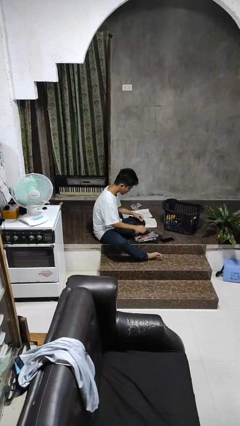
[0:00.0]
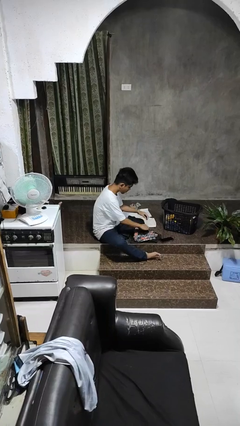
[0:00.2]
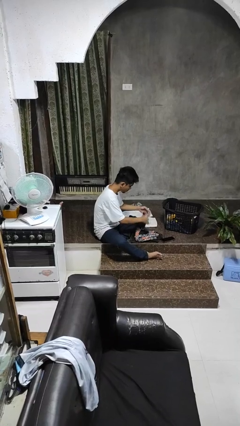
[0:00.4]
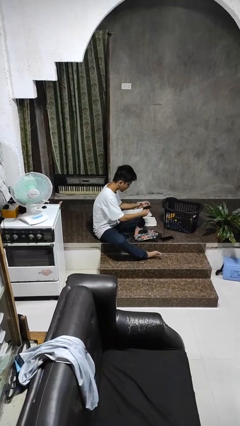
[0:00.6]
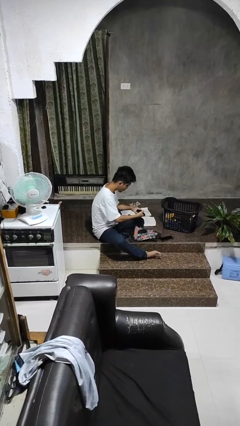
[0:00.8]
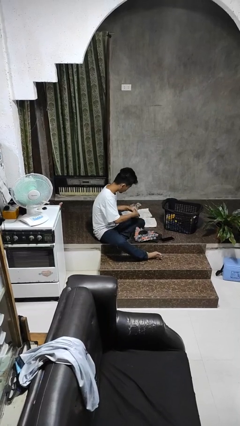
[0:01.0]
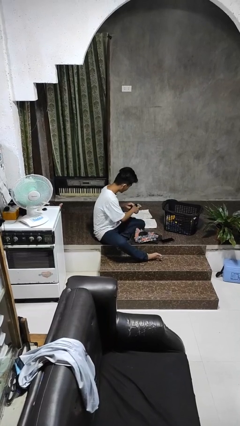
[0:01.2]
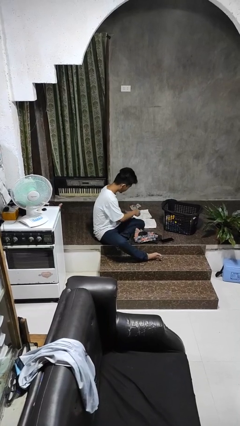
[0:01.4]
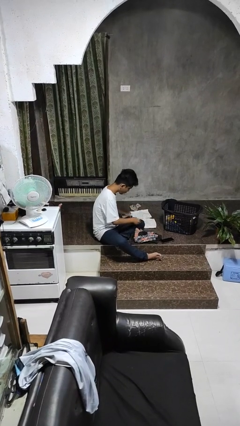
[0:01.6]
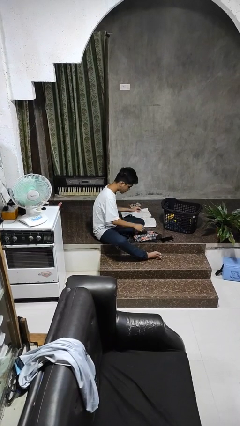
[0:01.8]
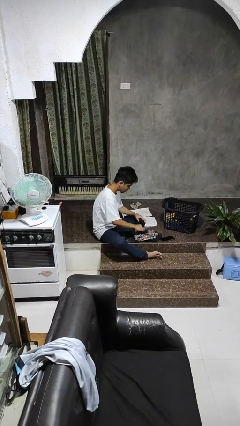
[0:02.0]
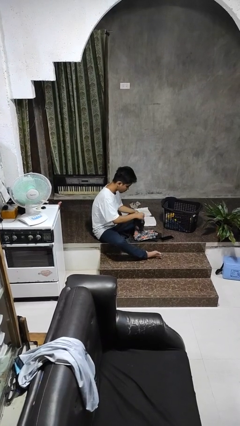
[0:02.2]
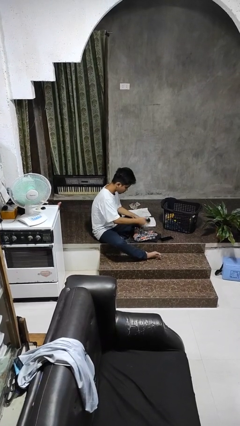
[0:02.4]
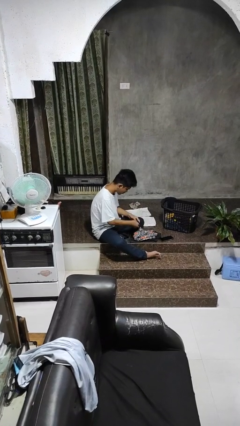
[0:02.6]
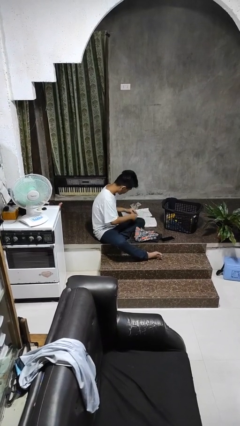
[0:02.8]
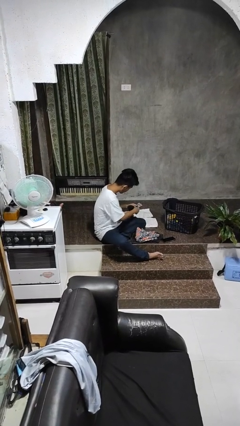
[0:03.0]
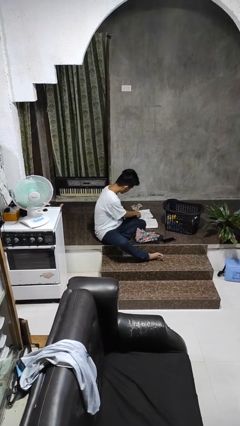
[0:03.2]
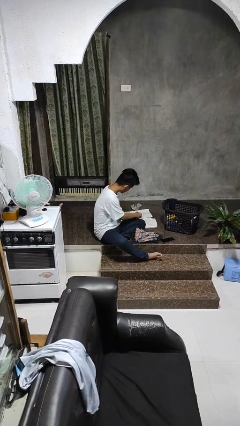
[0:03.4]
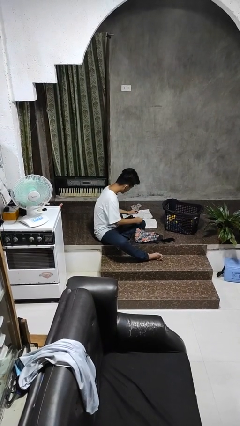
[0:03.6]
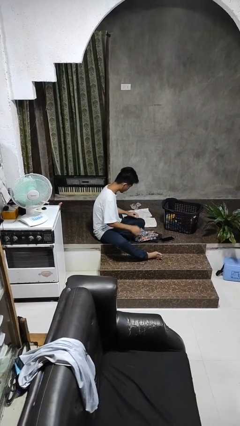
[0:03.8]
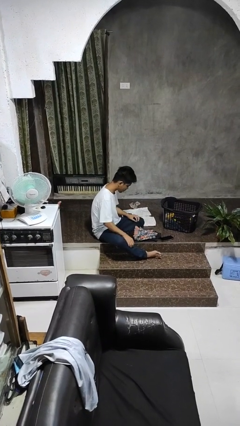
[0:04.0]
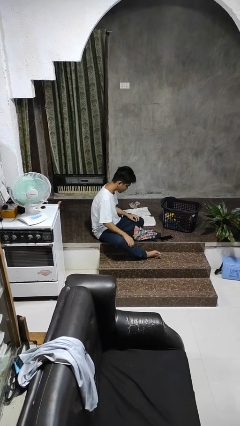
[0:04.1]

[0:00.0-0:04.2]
person folds socks

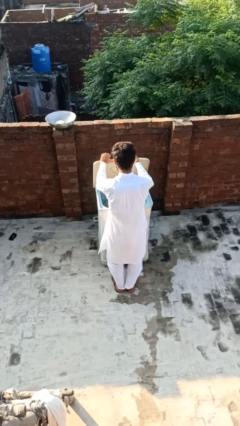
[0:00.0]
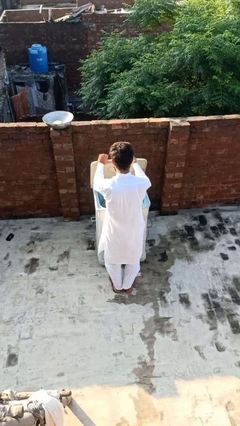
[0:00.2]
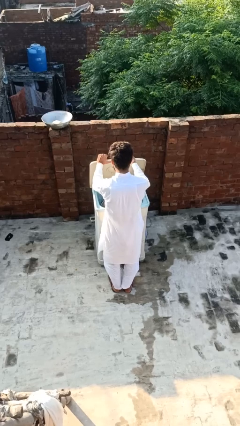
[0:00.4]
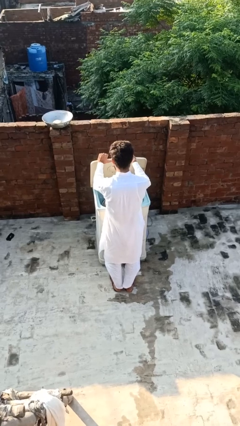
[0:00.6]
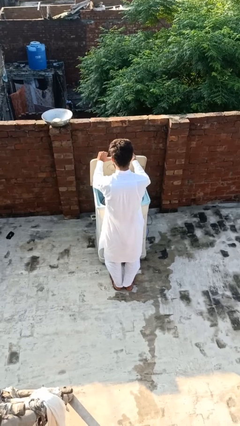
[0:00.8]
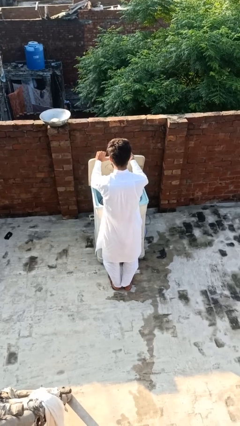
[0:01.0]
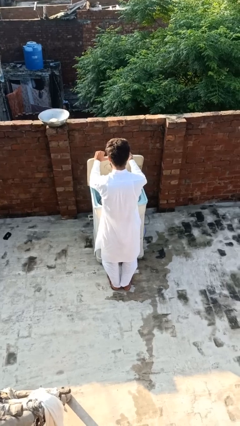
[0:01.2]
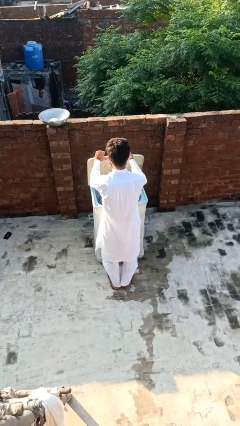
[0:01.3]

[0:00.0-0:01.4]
person opens clothes washer

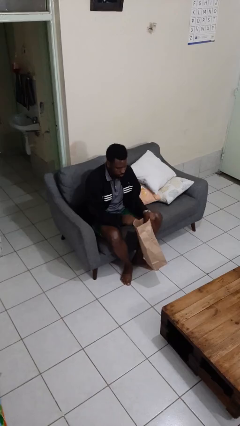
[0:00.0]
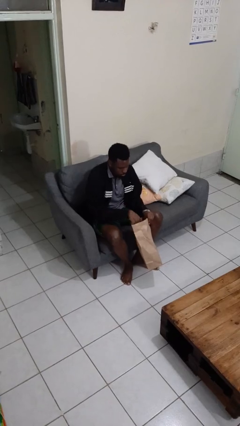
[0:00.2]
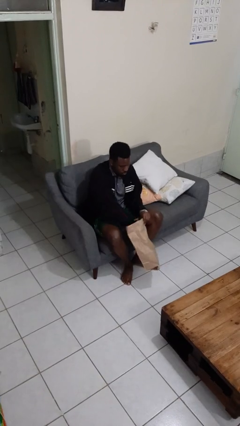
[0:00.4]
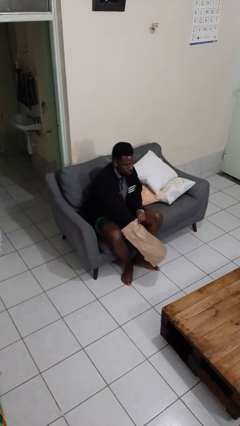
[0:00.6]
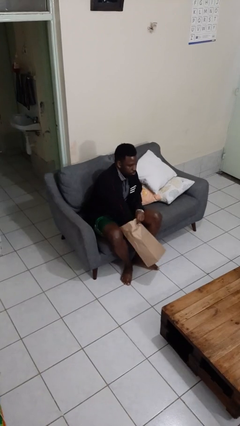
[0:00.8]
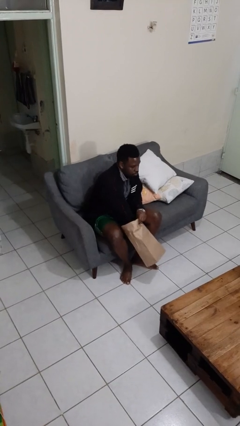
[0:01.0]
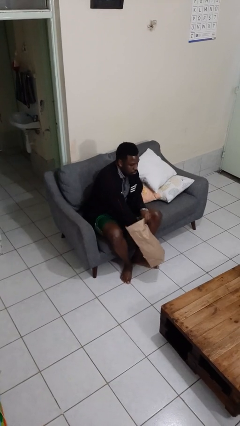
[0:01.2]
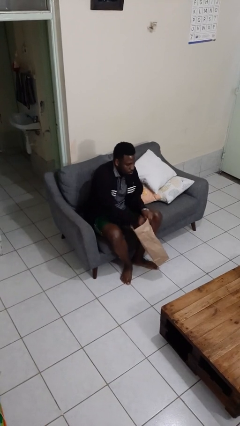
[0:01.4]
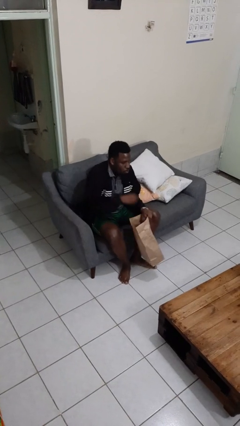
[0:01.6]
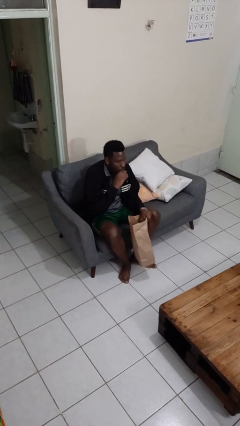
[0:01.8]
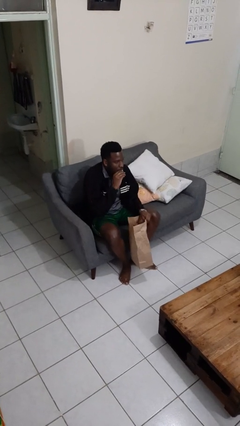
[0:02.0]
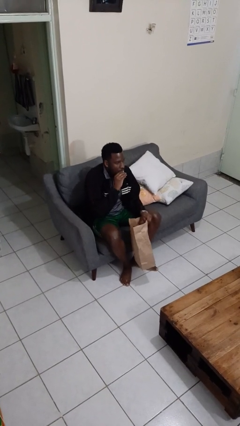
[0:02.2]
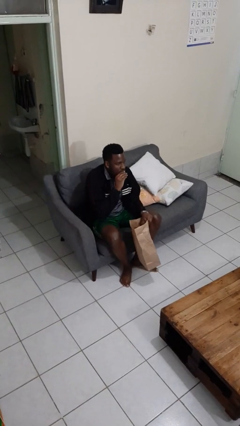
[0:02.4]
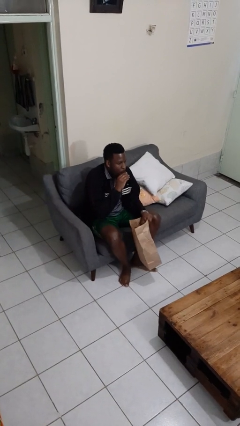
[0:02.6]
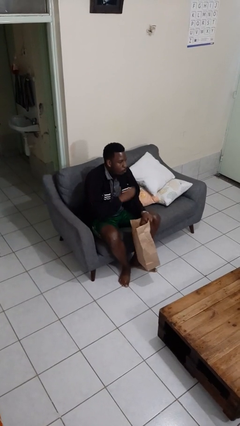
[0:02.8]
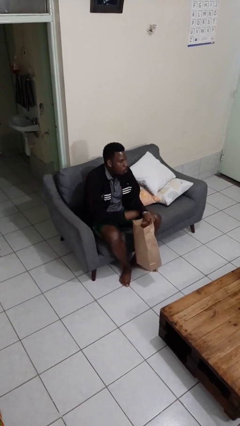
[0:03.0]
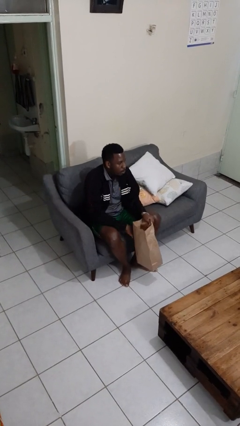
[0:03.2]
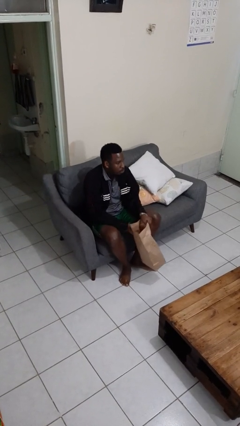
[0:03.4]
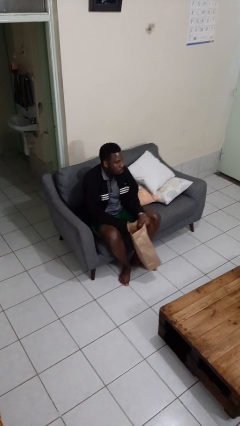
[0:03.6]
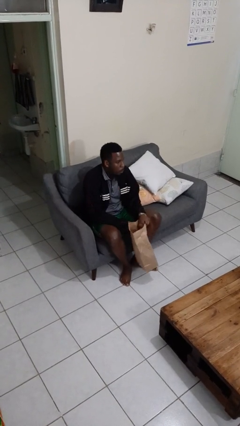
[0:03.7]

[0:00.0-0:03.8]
person eats snack from bag

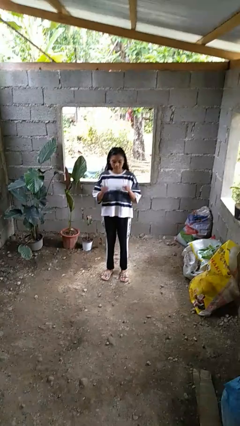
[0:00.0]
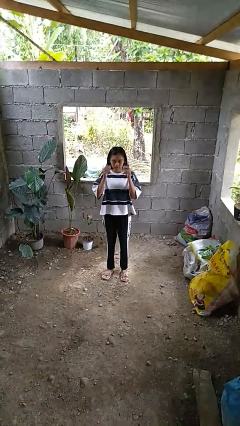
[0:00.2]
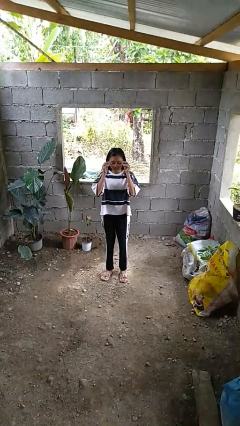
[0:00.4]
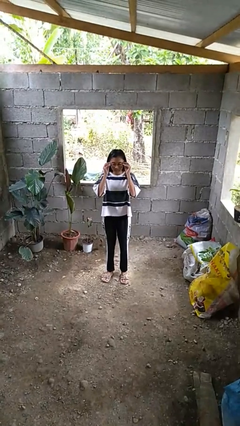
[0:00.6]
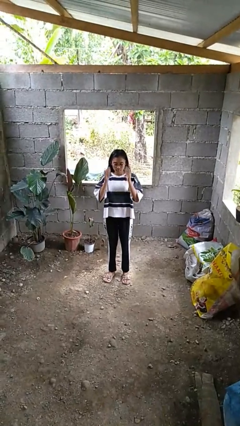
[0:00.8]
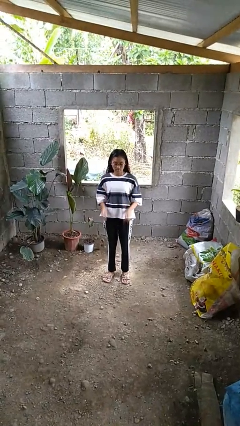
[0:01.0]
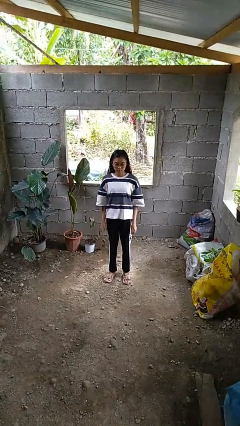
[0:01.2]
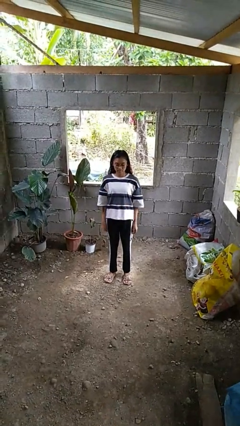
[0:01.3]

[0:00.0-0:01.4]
person puts on glasses

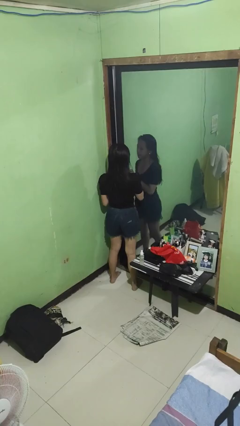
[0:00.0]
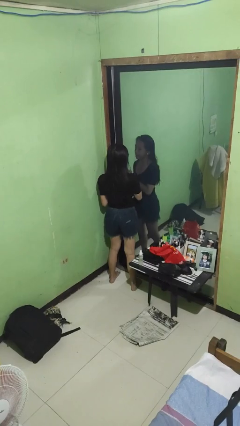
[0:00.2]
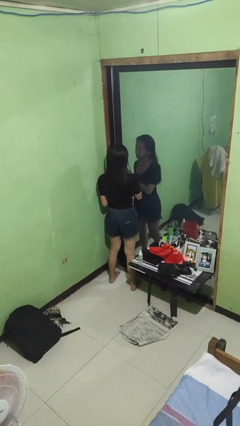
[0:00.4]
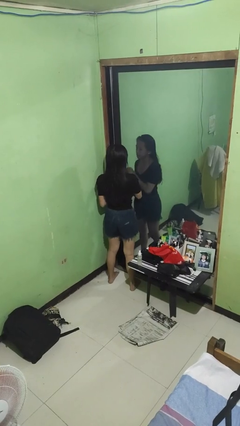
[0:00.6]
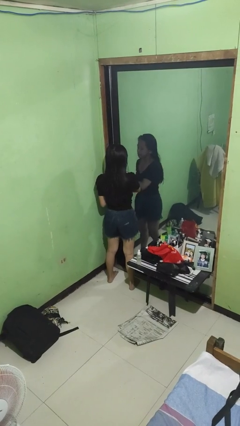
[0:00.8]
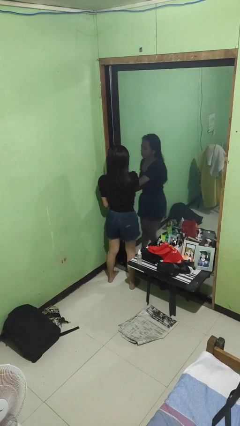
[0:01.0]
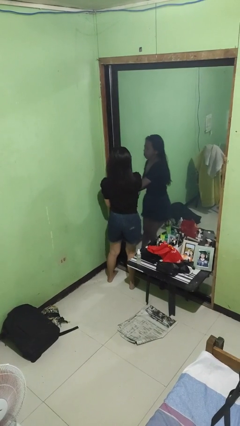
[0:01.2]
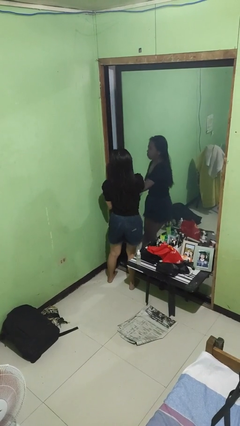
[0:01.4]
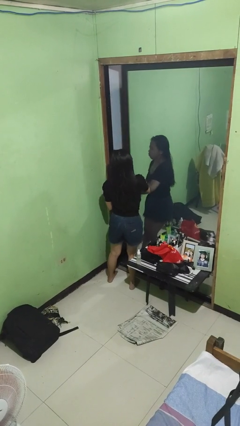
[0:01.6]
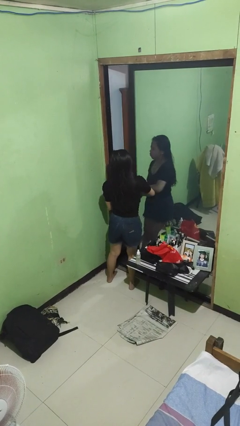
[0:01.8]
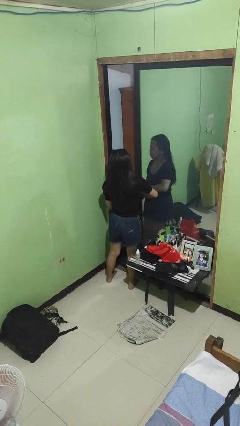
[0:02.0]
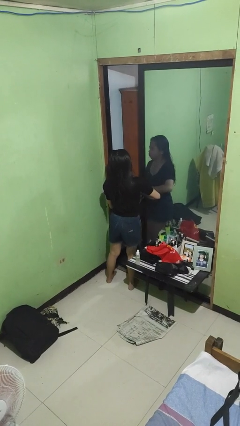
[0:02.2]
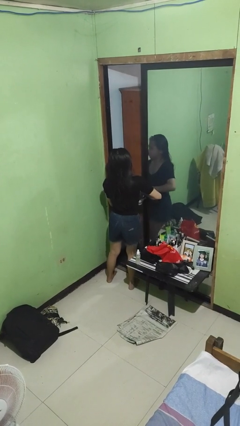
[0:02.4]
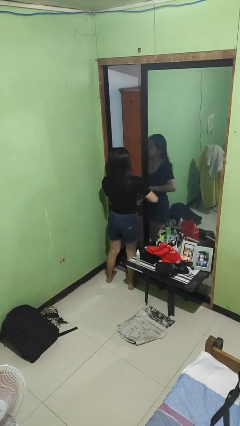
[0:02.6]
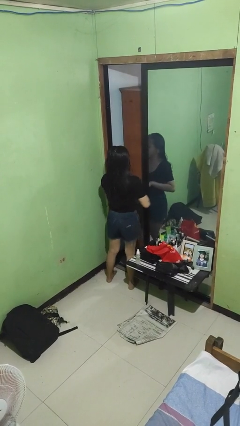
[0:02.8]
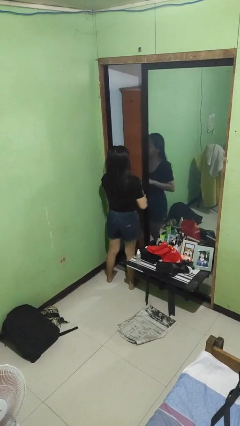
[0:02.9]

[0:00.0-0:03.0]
person opens sliding door

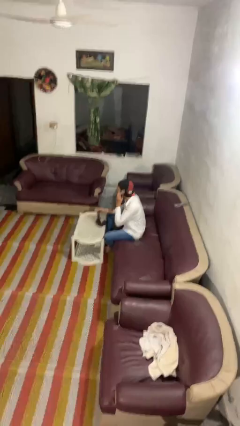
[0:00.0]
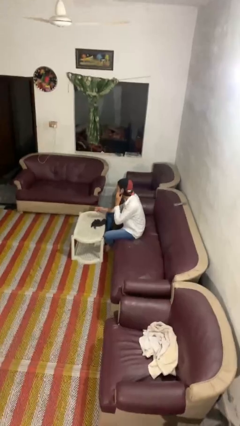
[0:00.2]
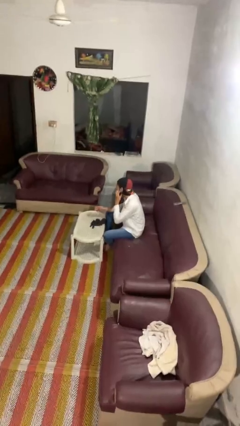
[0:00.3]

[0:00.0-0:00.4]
person puts on gloves

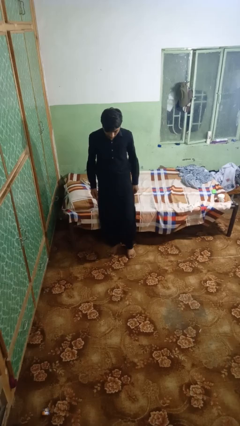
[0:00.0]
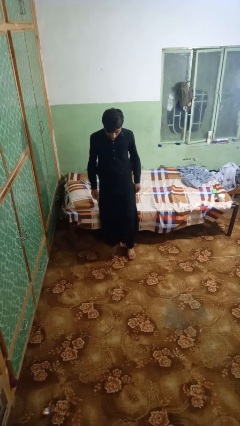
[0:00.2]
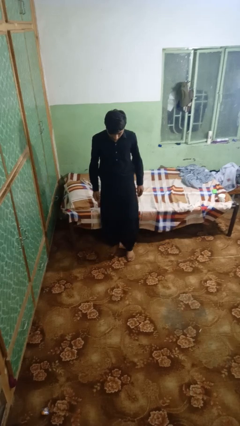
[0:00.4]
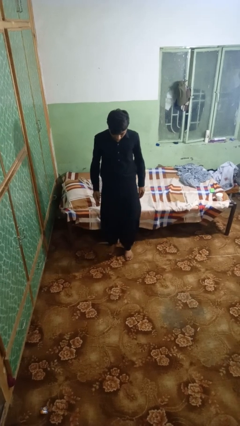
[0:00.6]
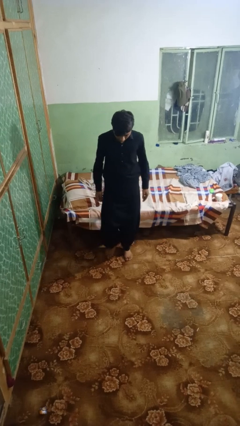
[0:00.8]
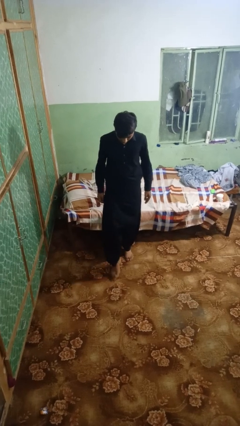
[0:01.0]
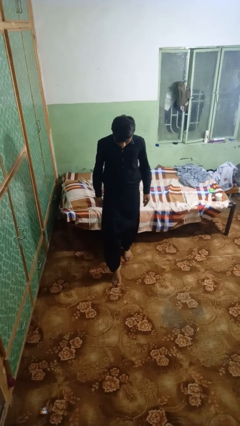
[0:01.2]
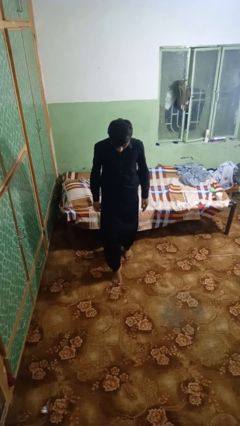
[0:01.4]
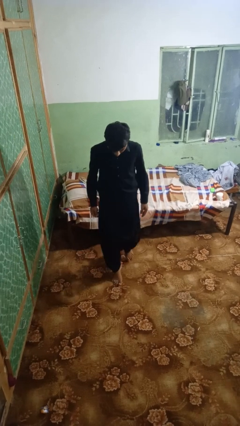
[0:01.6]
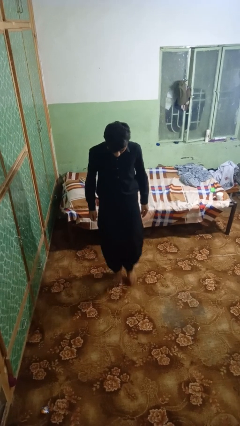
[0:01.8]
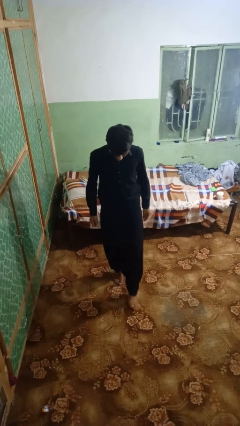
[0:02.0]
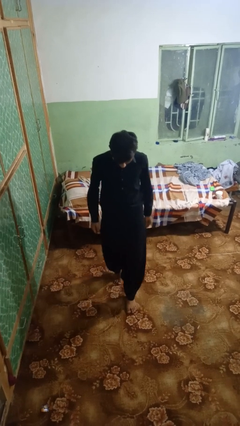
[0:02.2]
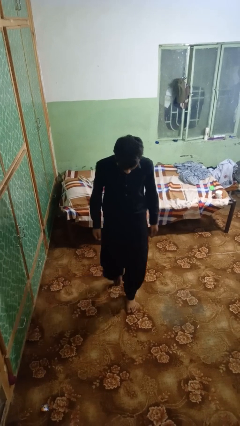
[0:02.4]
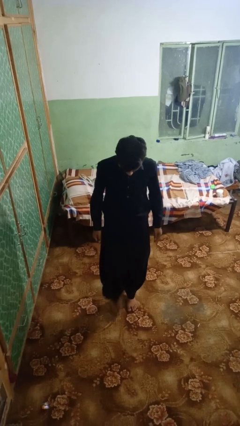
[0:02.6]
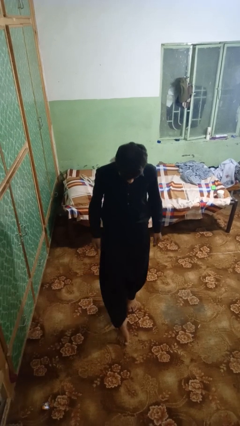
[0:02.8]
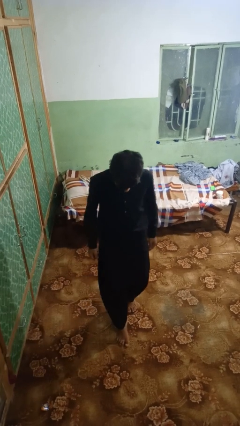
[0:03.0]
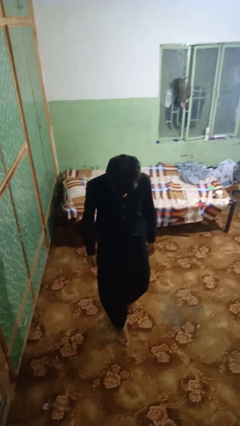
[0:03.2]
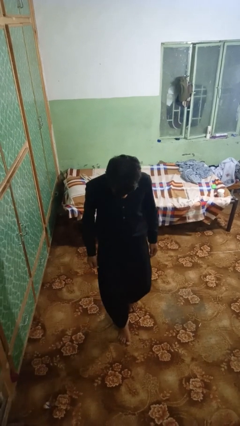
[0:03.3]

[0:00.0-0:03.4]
person walks tiptoe
